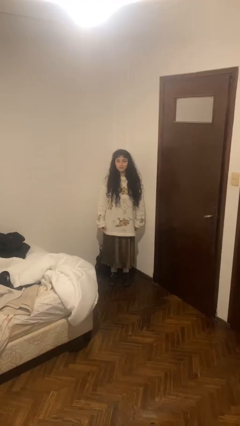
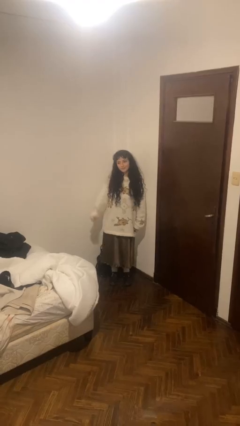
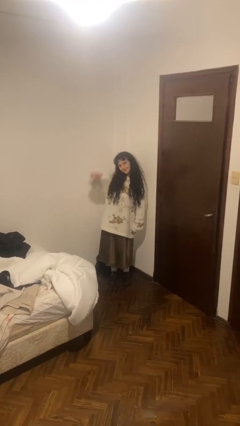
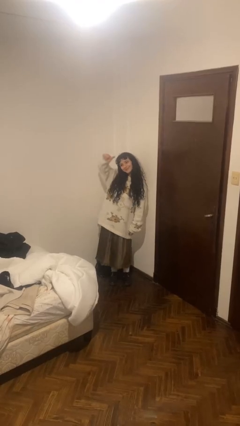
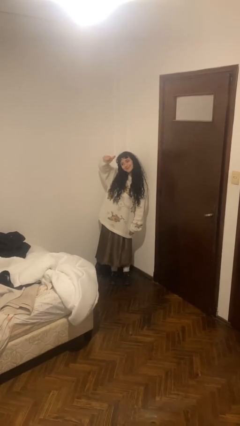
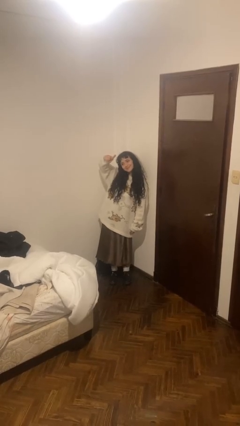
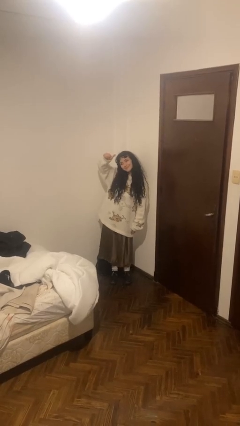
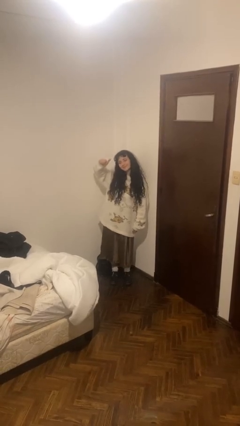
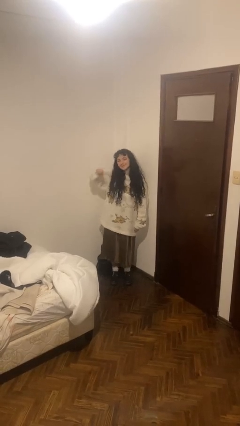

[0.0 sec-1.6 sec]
person gestures thumbs up

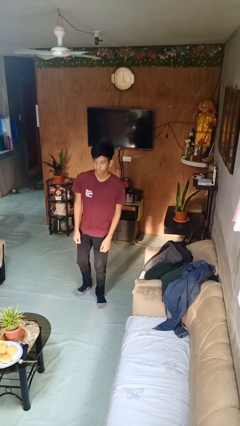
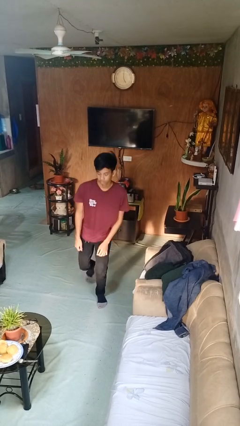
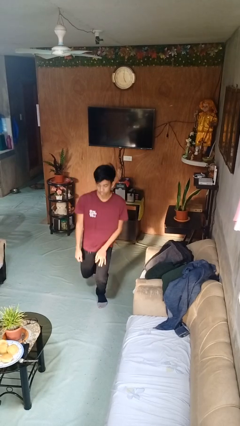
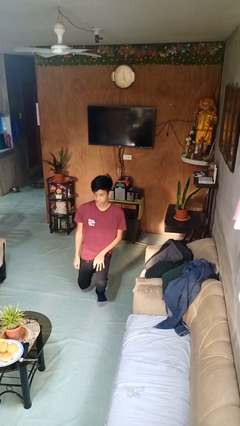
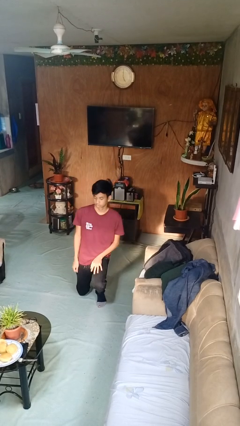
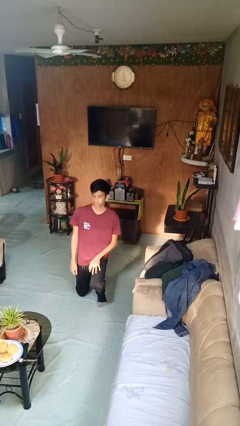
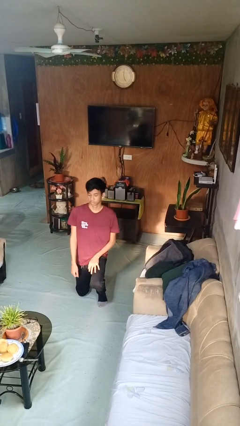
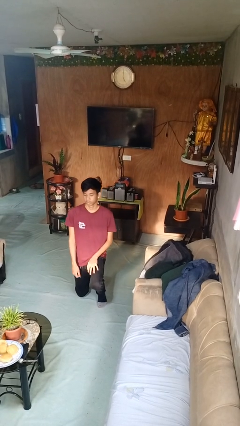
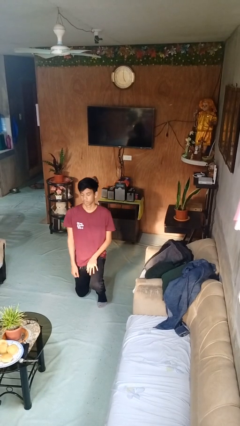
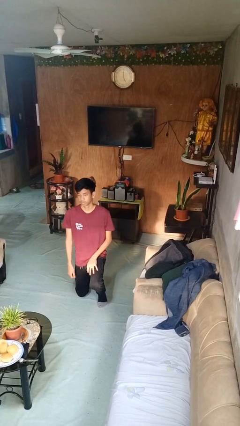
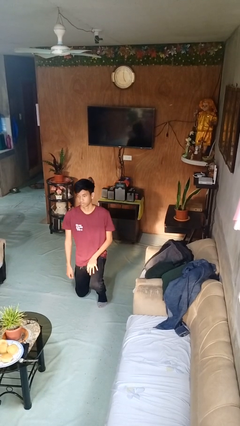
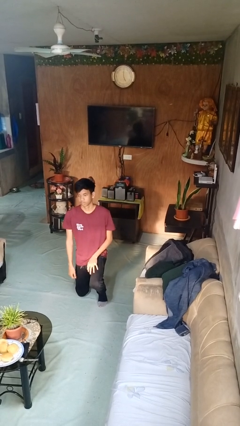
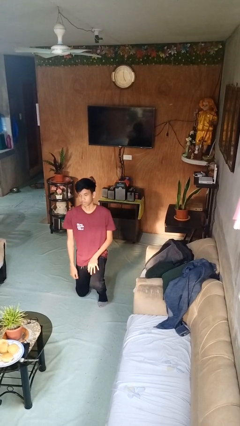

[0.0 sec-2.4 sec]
person kneels

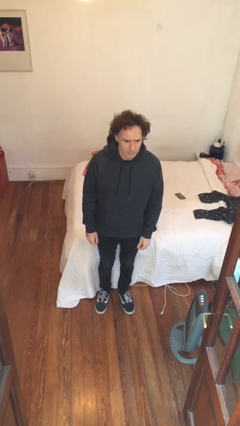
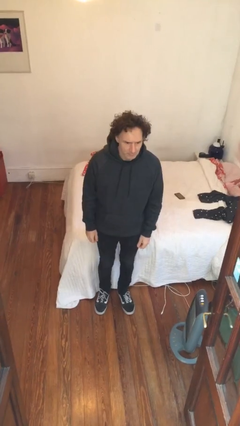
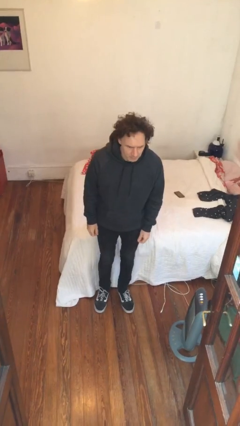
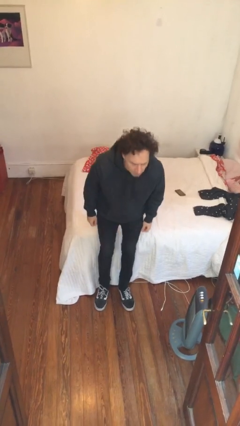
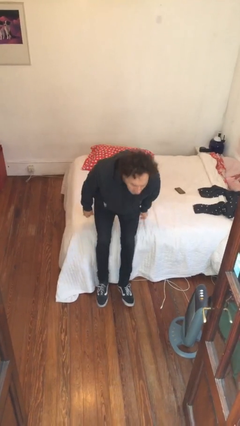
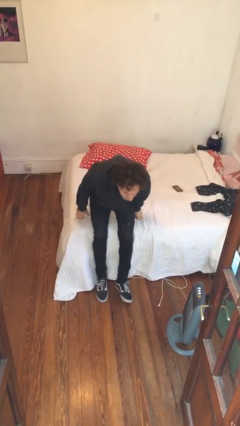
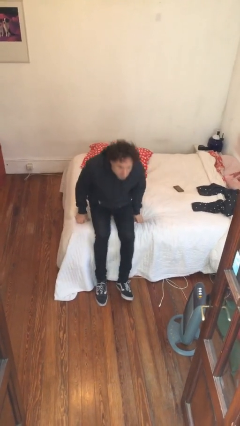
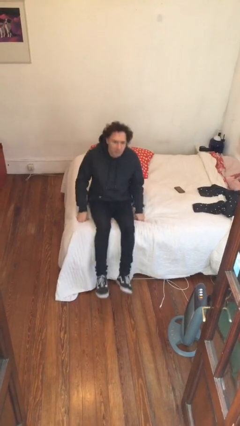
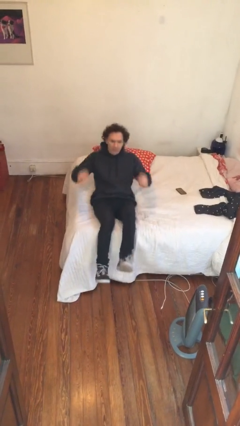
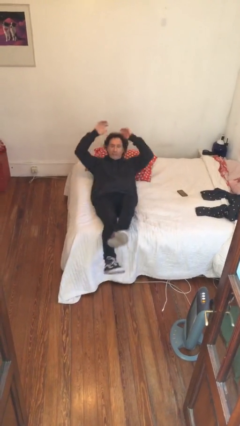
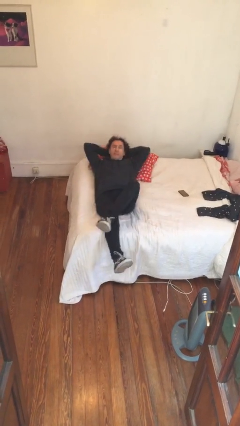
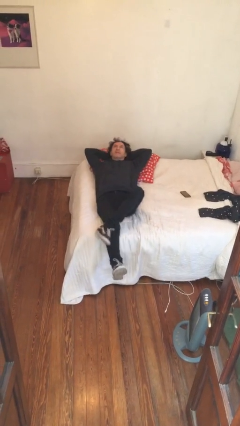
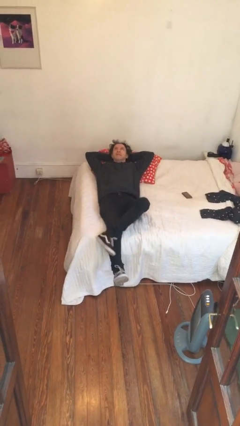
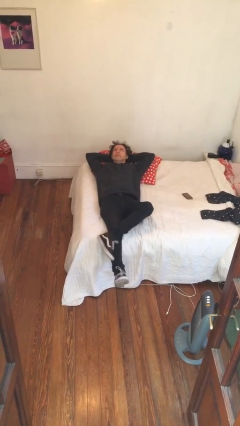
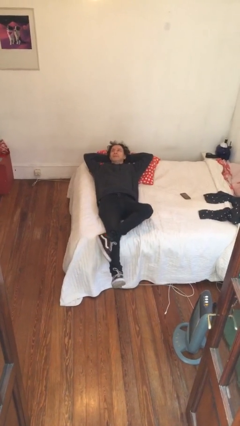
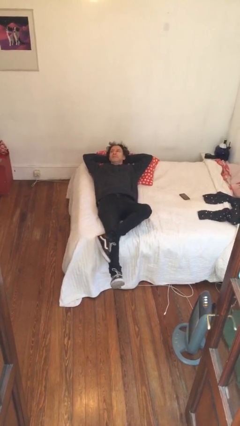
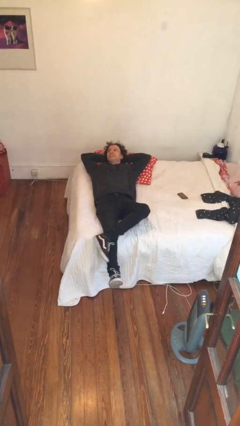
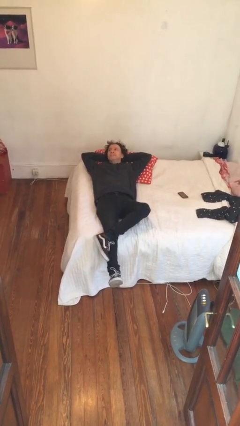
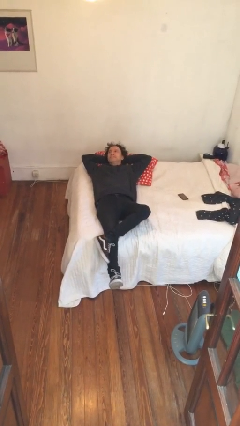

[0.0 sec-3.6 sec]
person lies down on bed

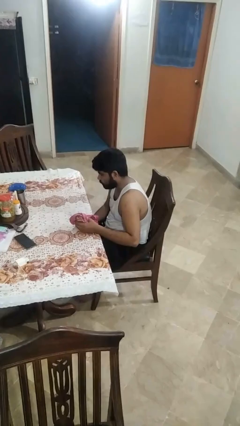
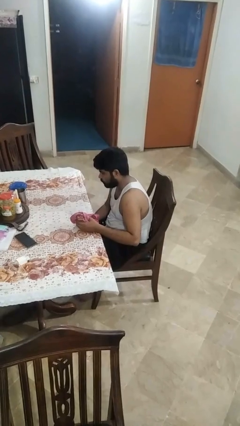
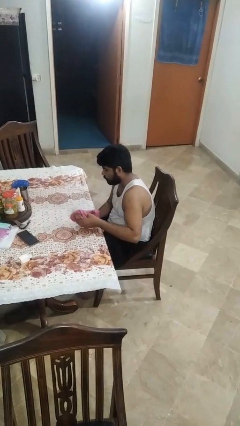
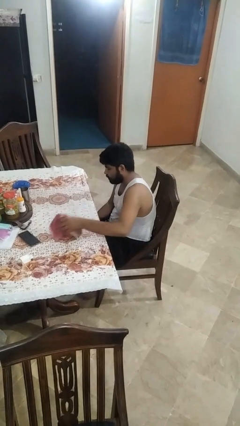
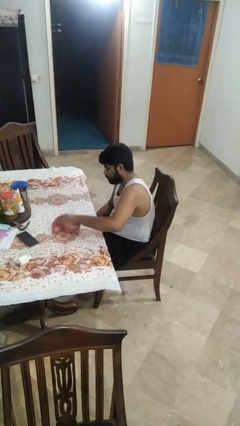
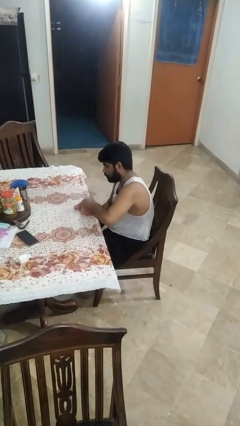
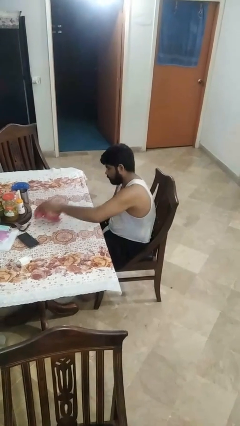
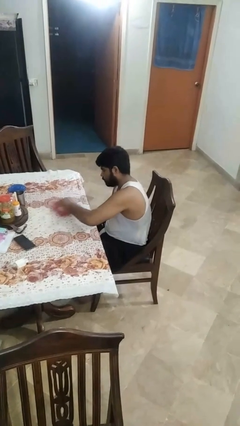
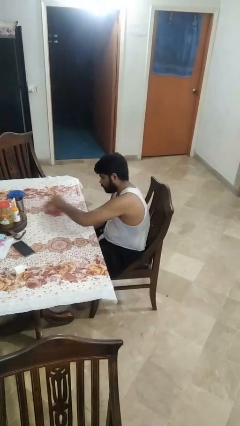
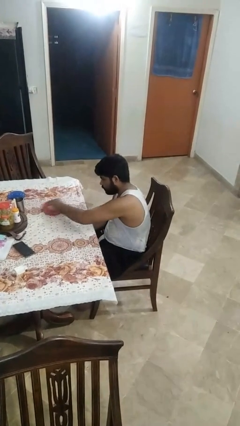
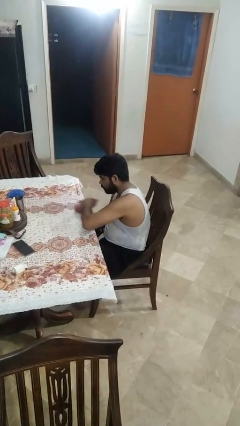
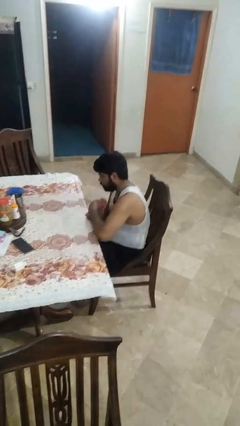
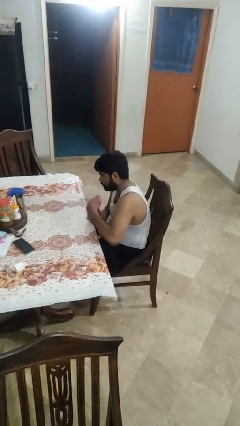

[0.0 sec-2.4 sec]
person cleans table with rag

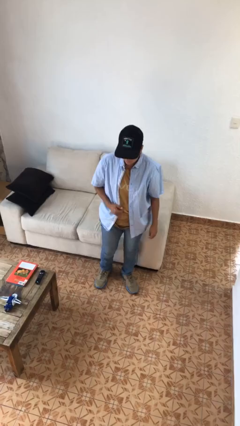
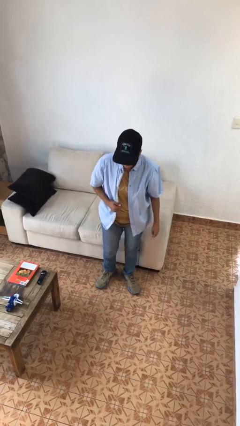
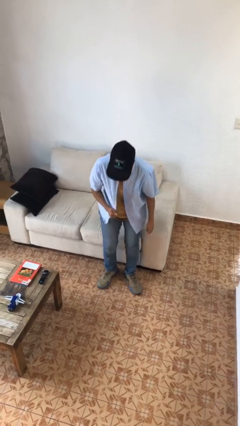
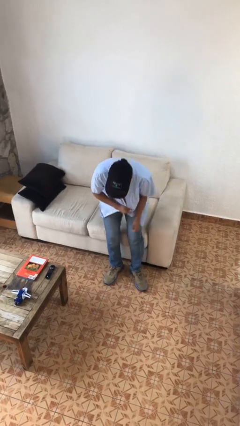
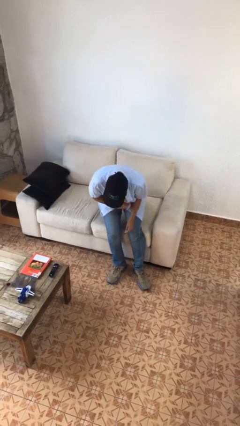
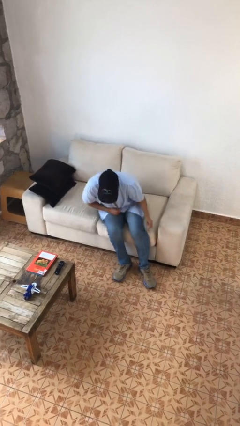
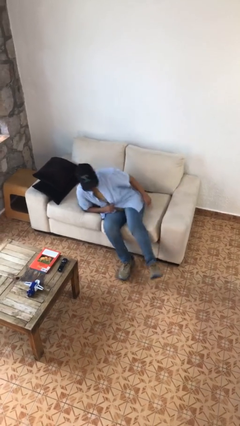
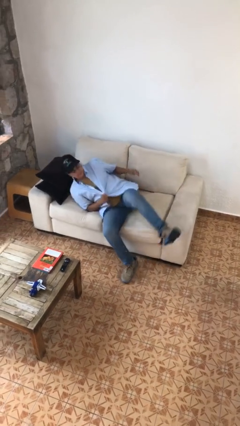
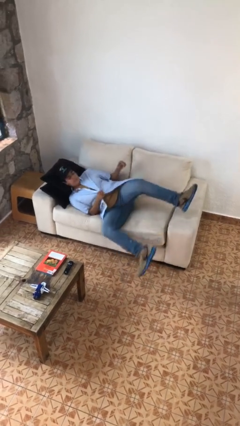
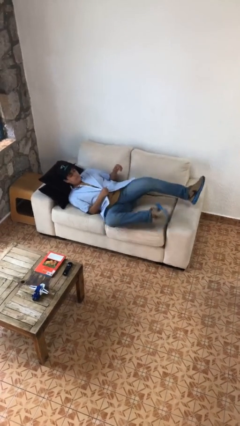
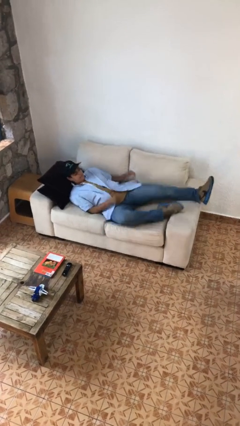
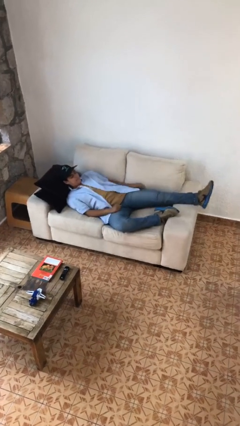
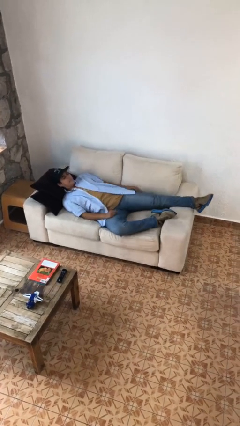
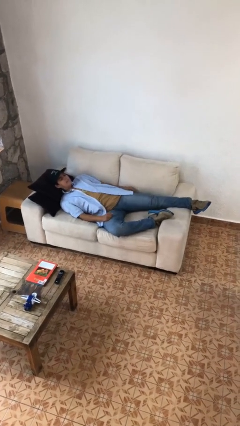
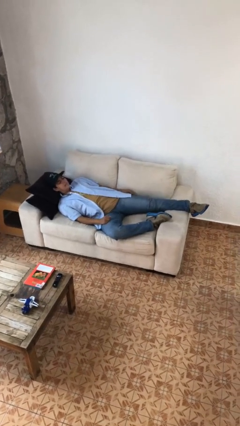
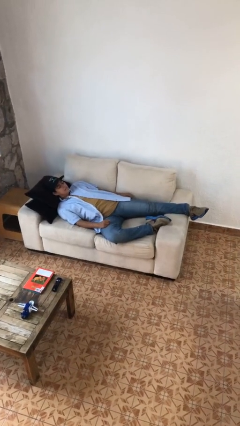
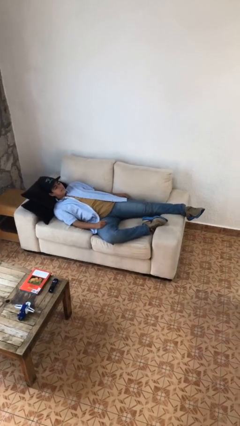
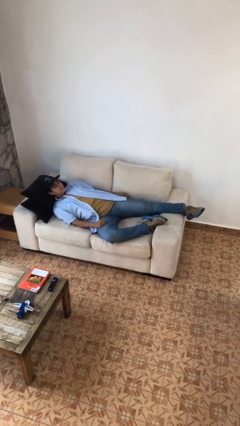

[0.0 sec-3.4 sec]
person lies down on couch

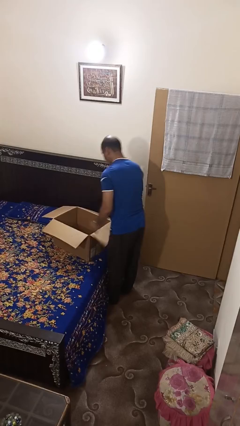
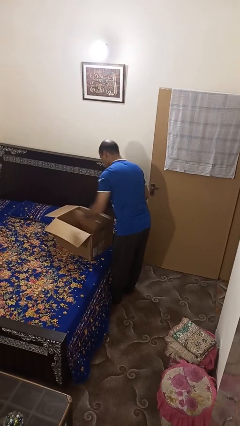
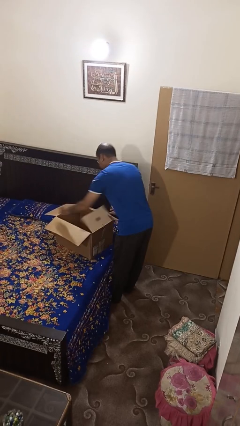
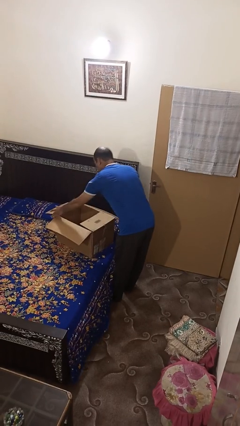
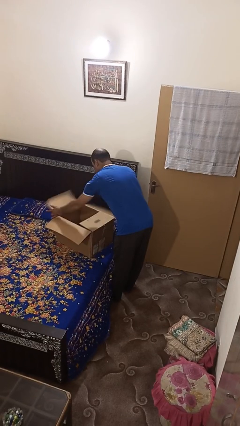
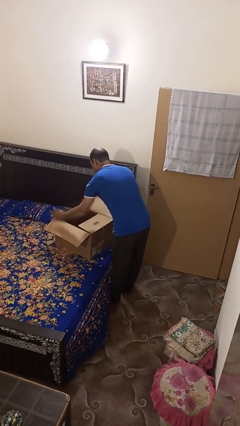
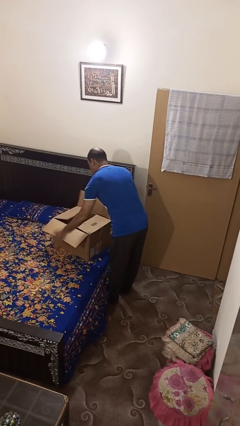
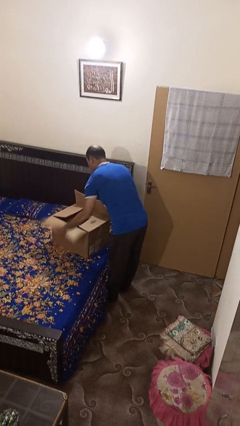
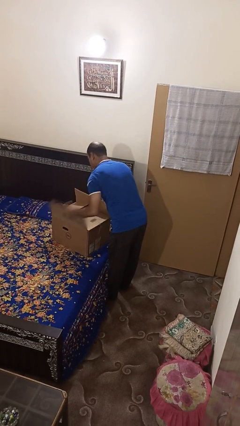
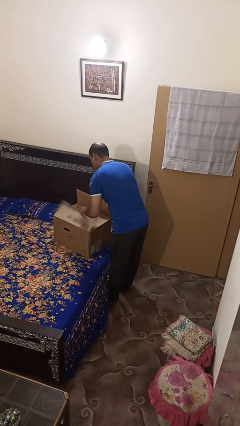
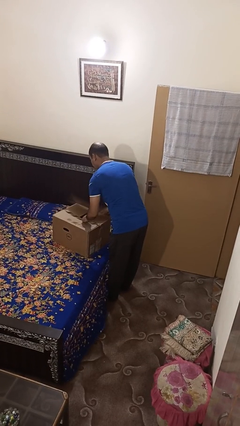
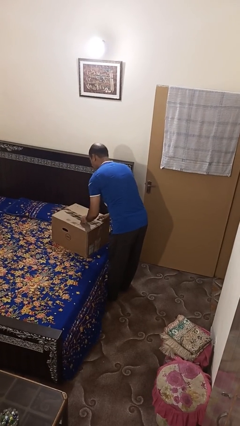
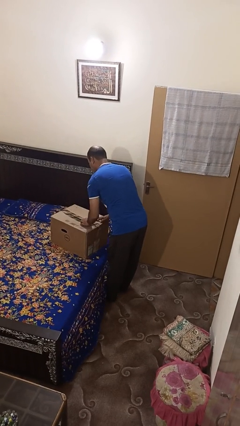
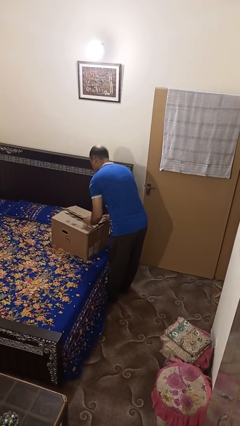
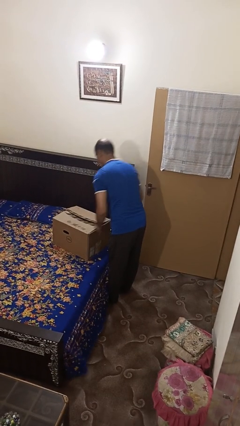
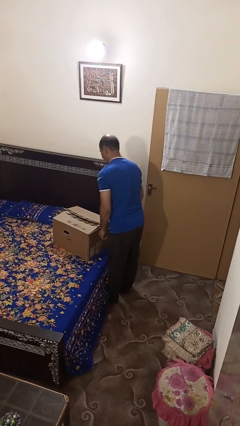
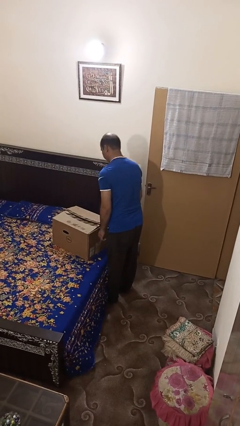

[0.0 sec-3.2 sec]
person closes box

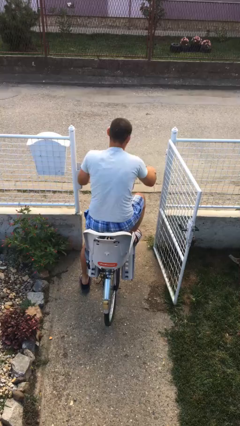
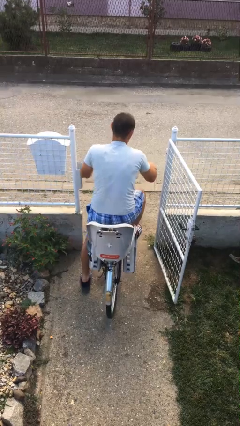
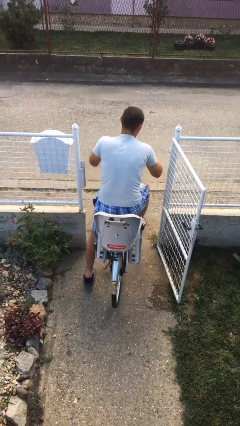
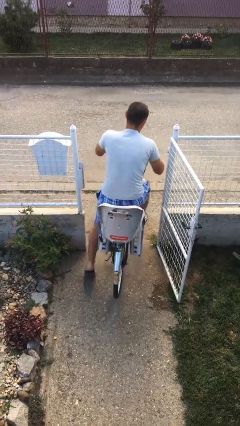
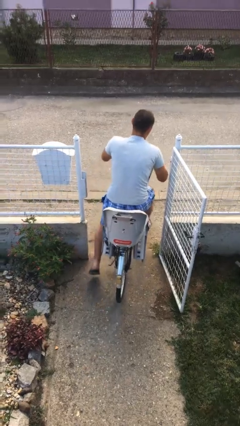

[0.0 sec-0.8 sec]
person rides bicycle
